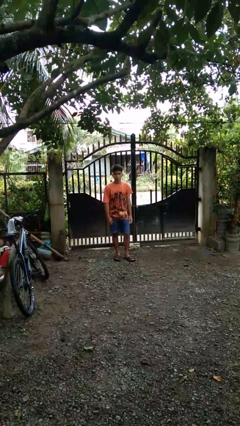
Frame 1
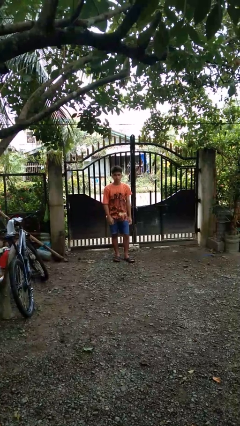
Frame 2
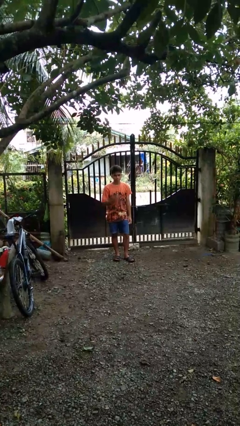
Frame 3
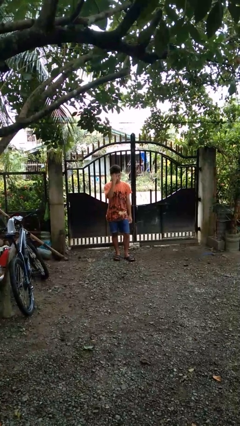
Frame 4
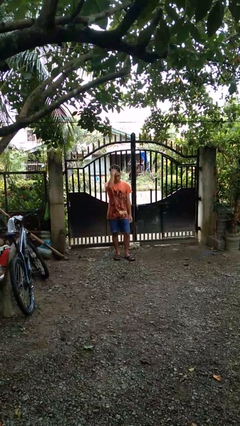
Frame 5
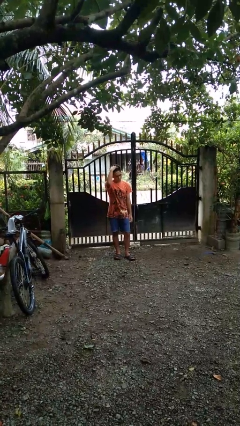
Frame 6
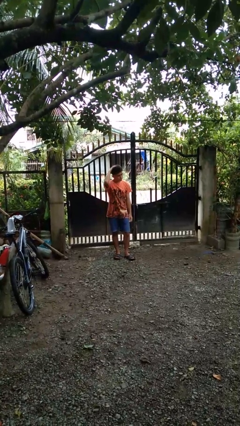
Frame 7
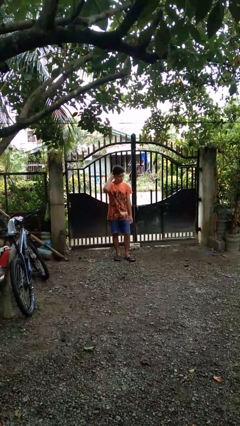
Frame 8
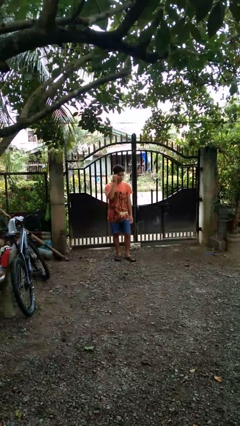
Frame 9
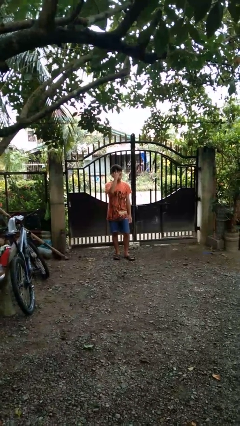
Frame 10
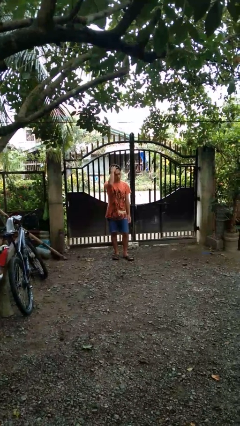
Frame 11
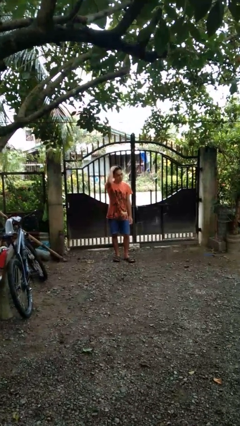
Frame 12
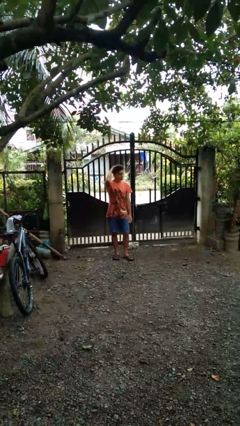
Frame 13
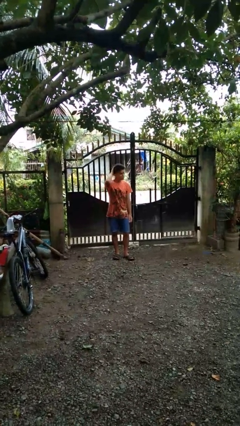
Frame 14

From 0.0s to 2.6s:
person strokes hair

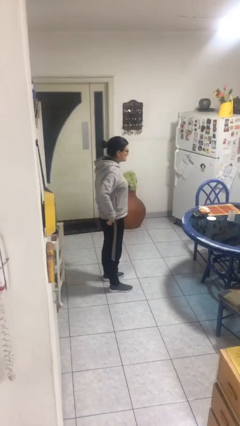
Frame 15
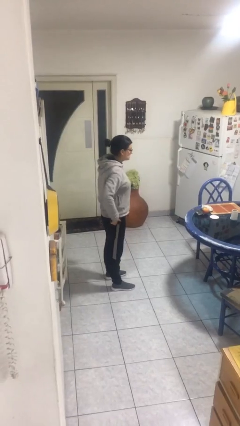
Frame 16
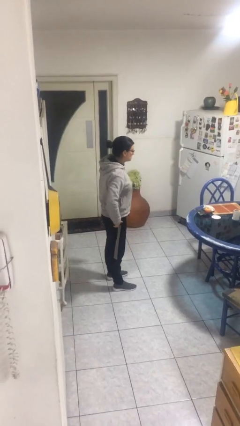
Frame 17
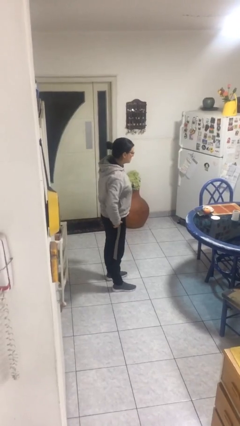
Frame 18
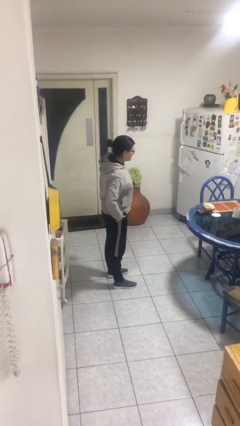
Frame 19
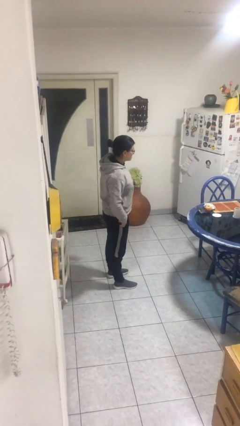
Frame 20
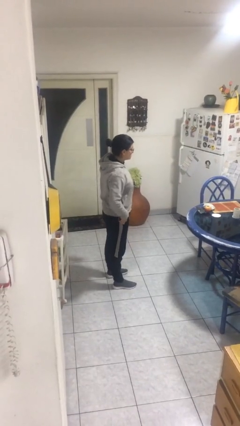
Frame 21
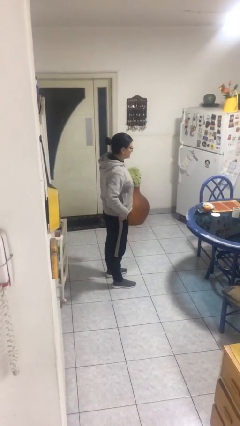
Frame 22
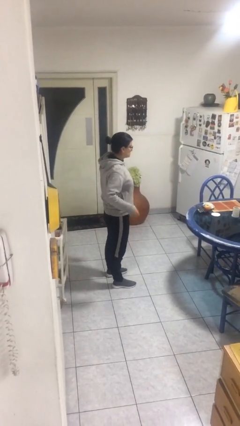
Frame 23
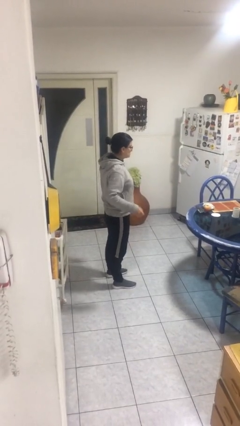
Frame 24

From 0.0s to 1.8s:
person puts phone into pocket

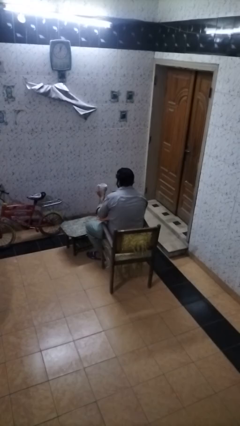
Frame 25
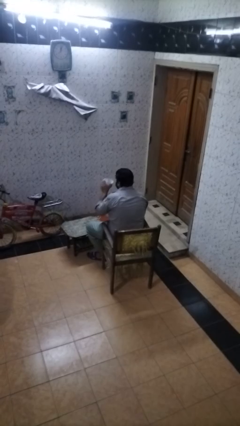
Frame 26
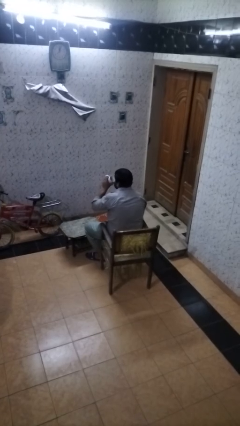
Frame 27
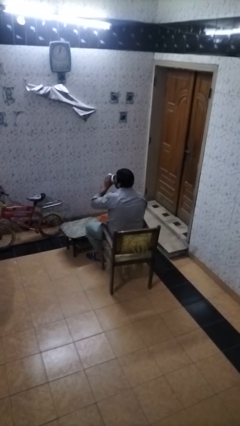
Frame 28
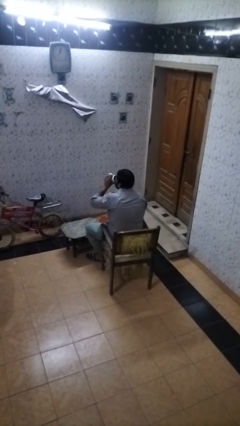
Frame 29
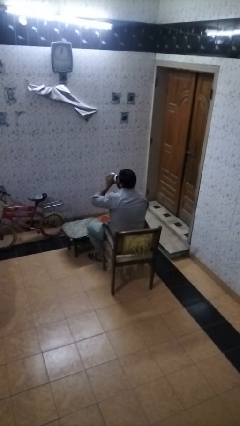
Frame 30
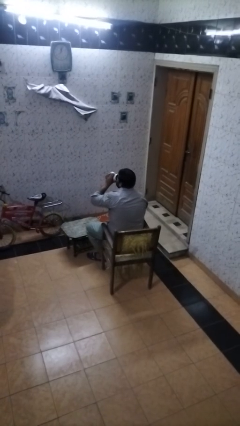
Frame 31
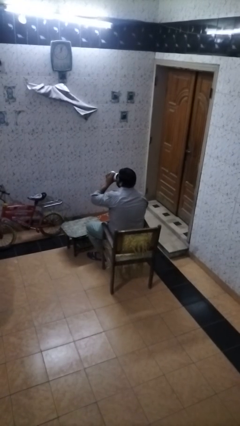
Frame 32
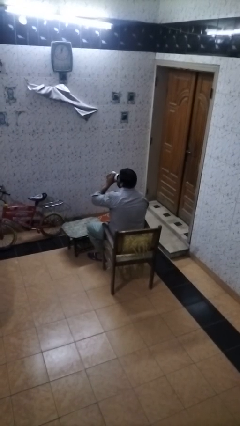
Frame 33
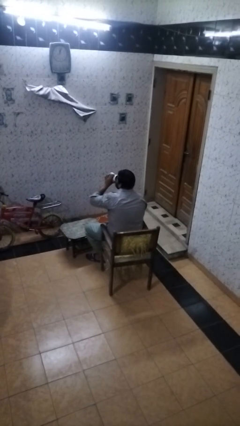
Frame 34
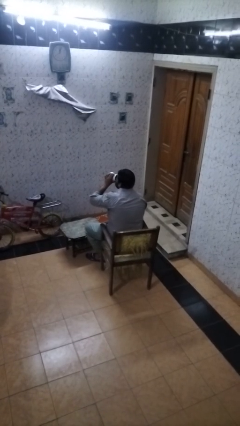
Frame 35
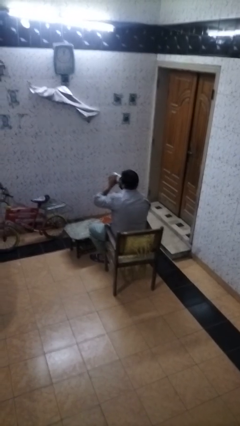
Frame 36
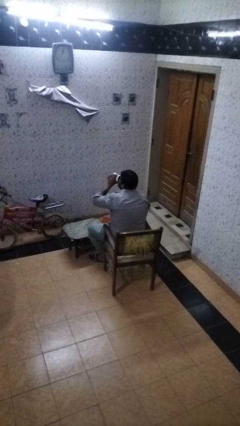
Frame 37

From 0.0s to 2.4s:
person drinks from mug

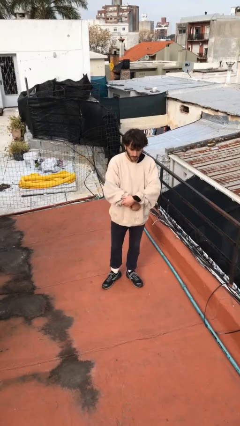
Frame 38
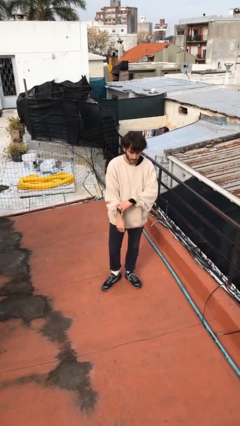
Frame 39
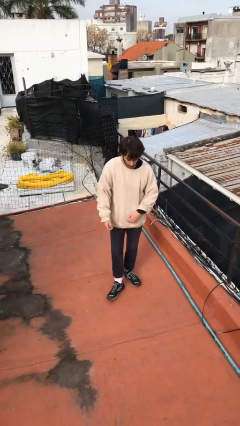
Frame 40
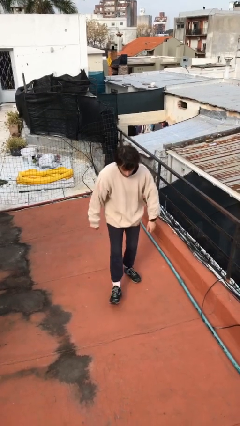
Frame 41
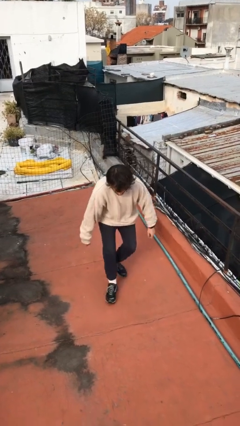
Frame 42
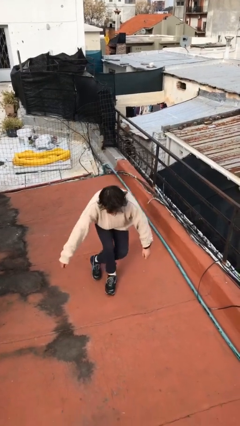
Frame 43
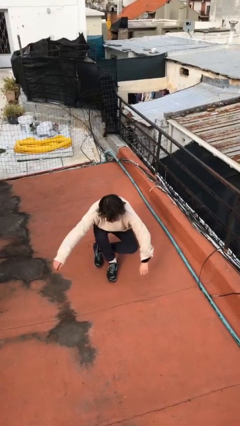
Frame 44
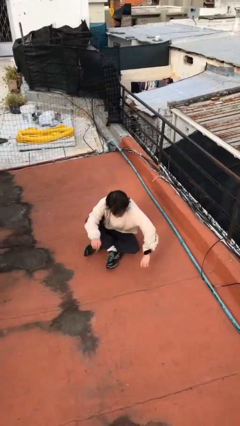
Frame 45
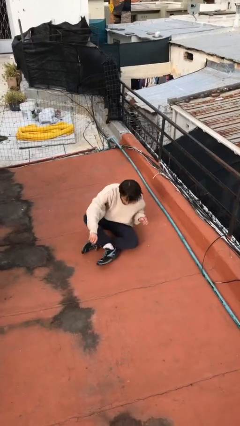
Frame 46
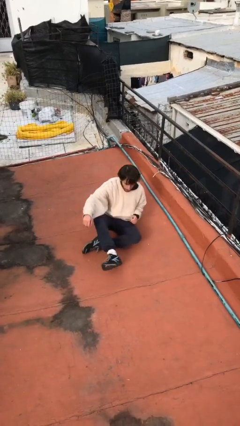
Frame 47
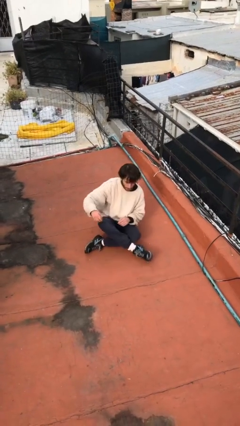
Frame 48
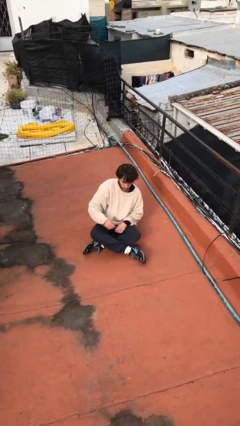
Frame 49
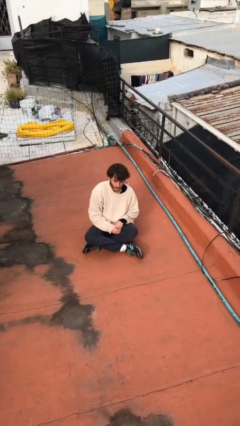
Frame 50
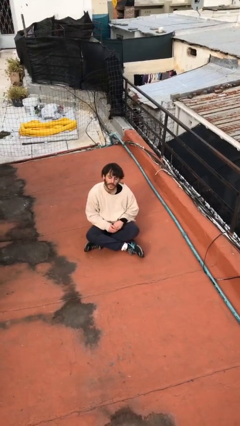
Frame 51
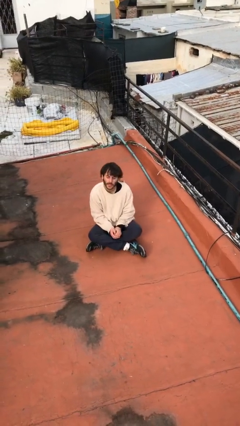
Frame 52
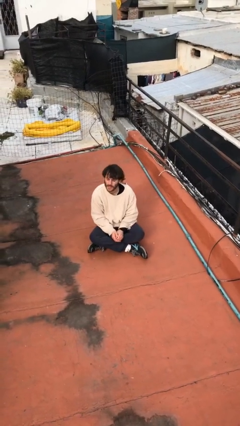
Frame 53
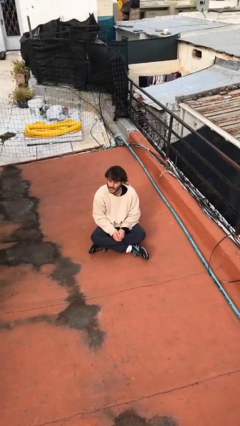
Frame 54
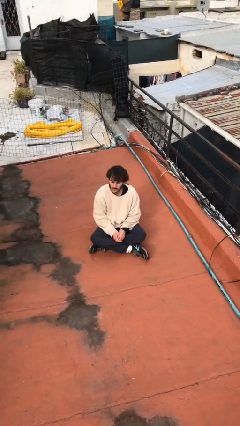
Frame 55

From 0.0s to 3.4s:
person sits crisscross

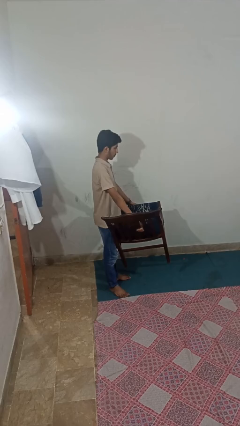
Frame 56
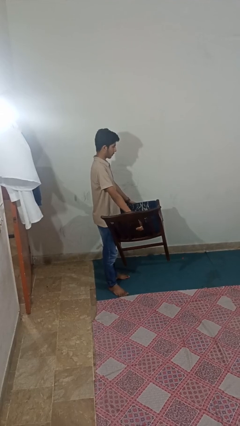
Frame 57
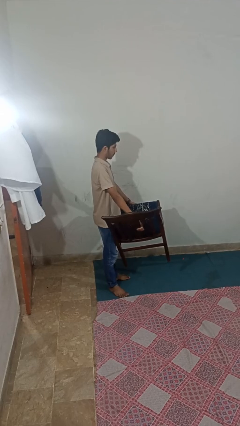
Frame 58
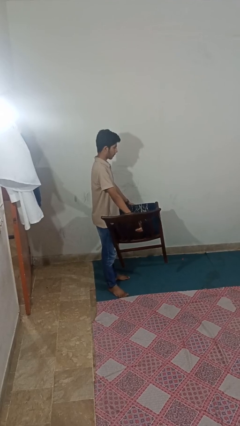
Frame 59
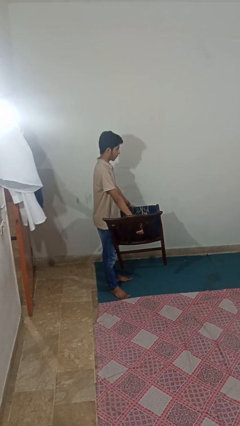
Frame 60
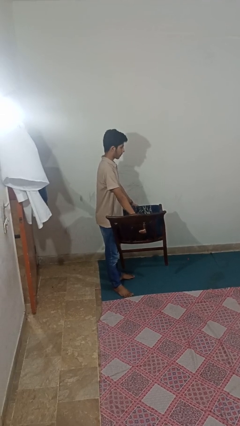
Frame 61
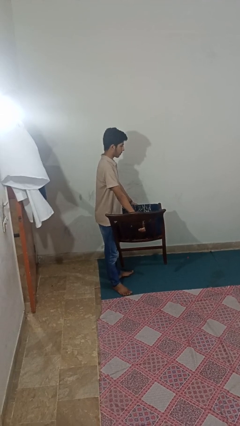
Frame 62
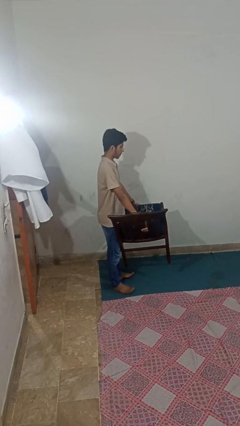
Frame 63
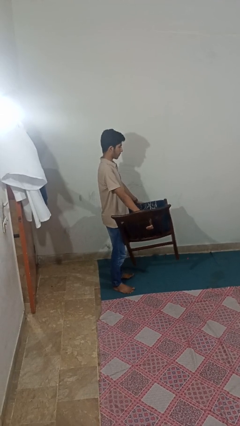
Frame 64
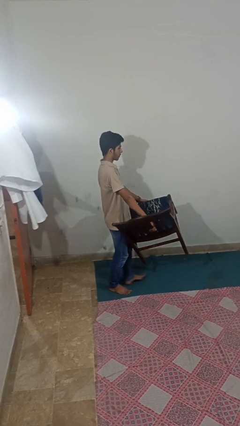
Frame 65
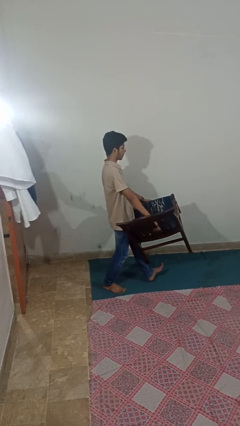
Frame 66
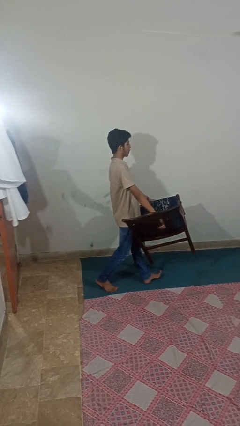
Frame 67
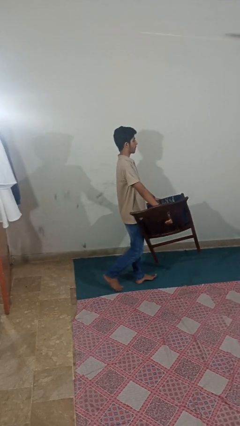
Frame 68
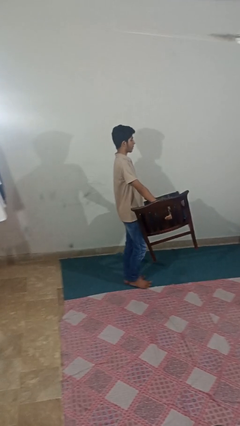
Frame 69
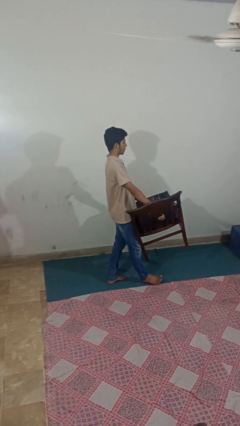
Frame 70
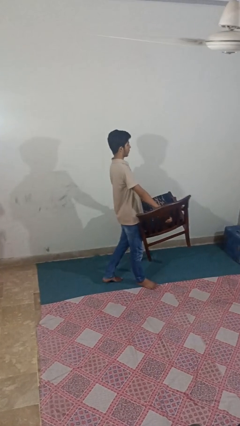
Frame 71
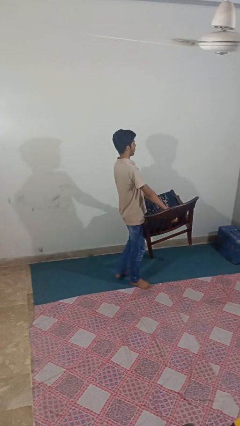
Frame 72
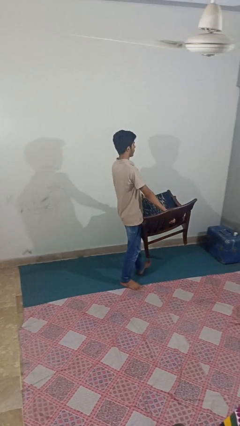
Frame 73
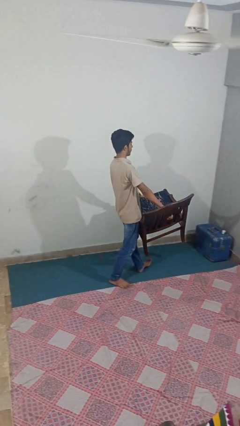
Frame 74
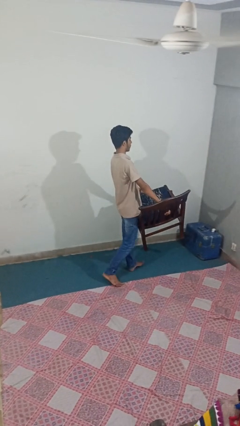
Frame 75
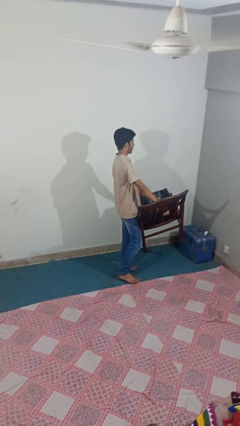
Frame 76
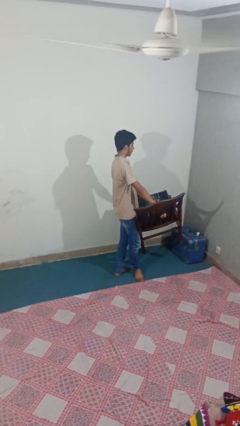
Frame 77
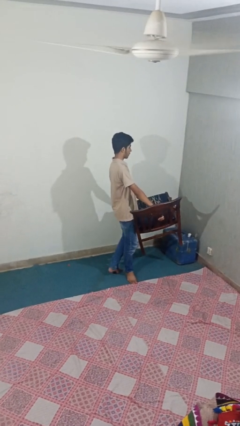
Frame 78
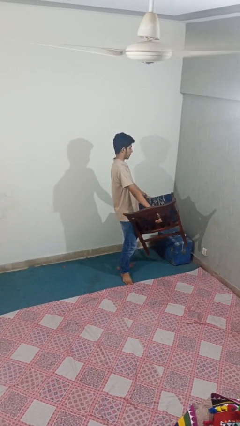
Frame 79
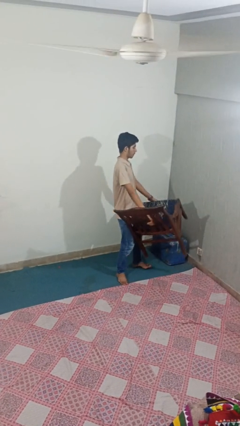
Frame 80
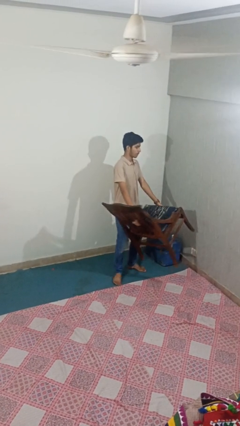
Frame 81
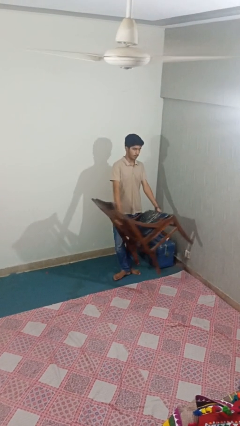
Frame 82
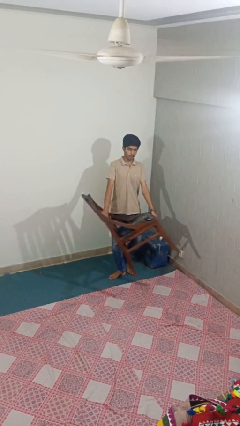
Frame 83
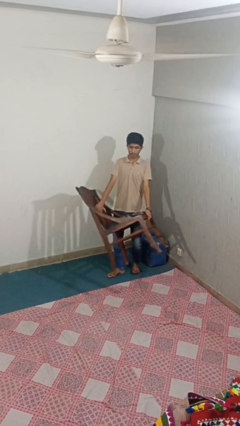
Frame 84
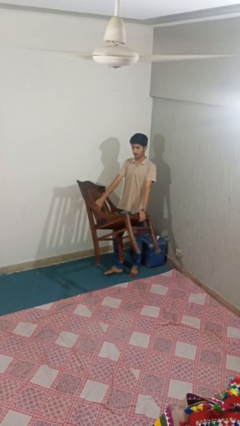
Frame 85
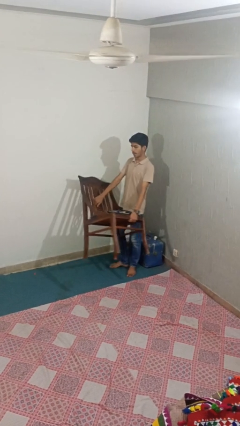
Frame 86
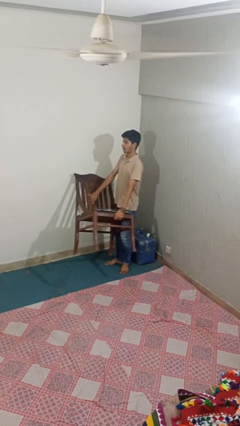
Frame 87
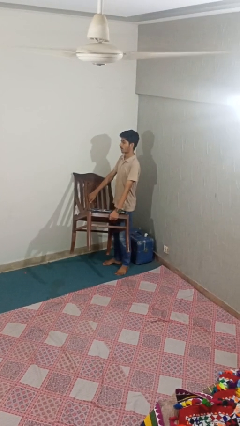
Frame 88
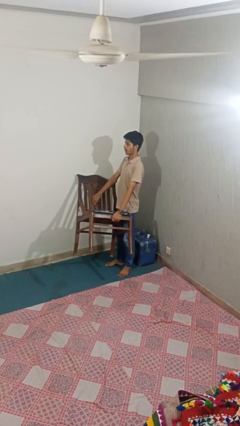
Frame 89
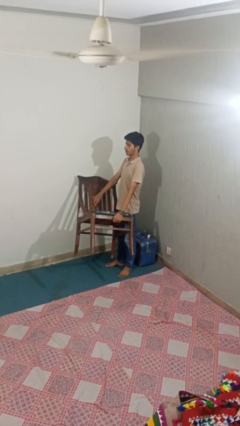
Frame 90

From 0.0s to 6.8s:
person carries furniture

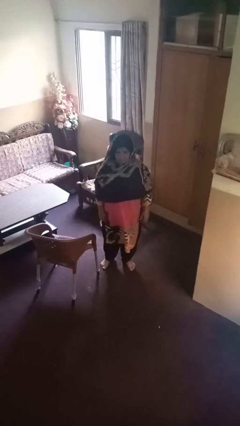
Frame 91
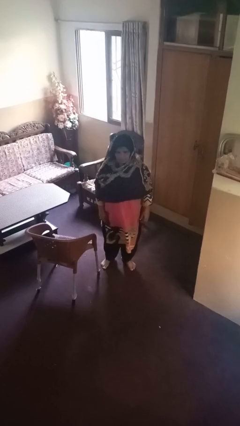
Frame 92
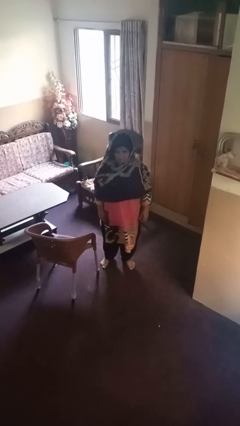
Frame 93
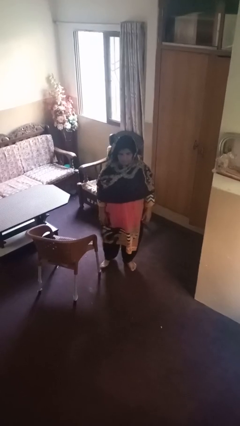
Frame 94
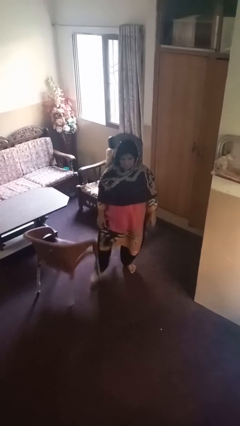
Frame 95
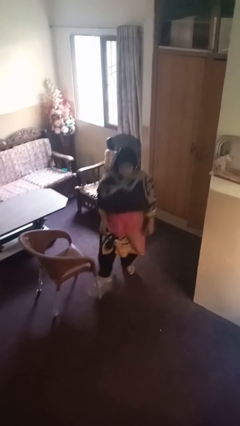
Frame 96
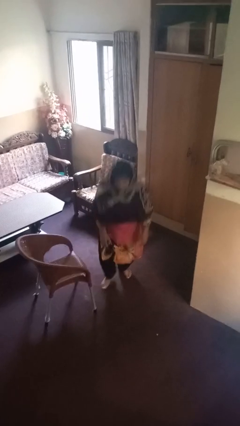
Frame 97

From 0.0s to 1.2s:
person trips on object on floor
